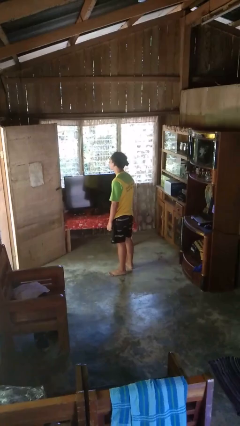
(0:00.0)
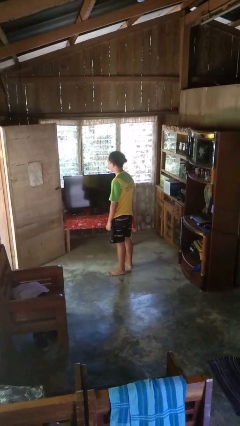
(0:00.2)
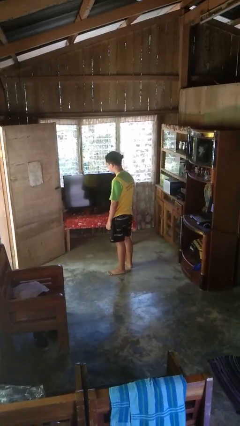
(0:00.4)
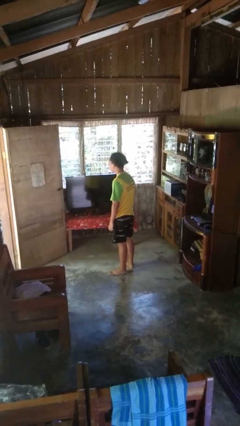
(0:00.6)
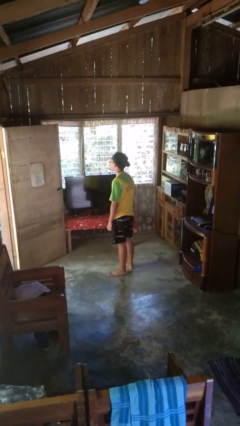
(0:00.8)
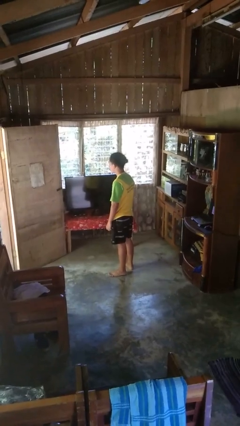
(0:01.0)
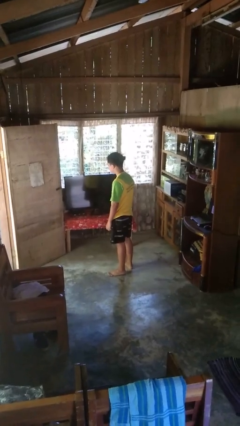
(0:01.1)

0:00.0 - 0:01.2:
person nods head

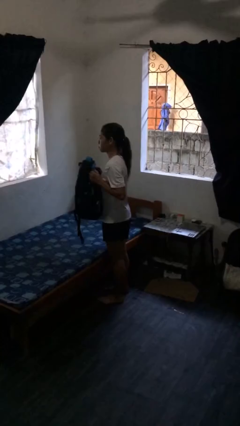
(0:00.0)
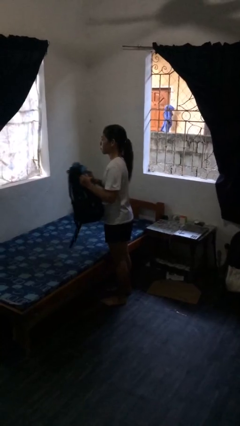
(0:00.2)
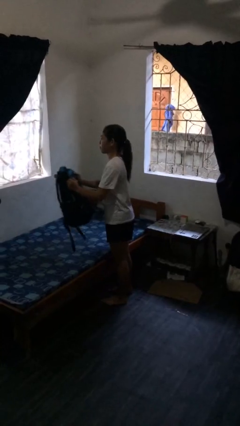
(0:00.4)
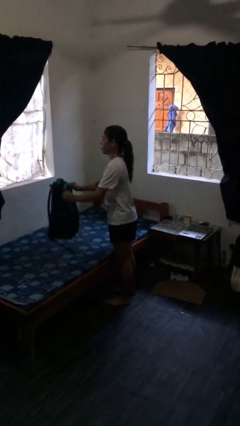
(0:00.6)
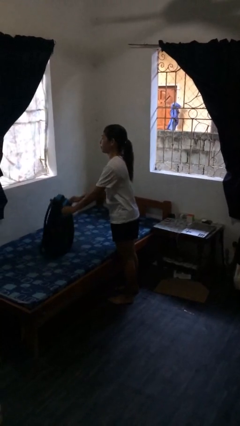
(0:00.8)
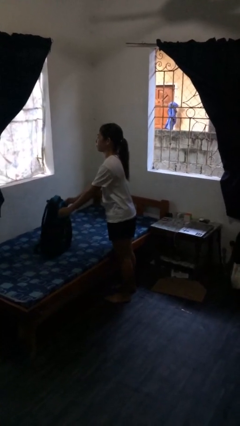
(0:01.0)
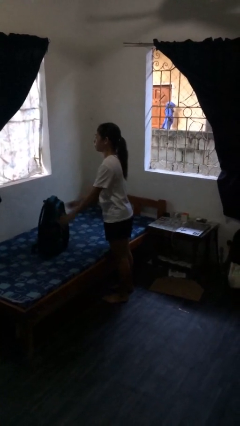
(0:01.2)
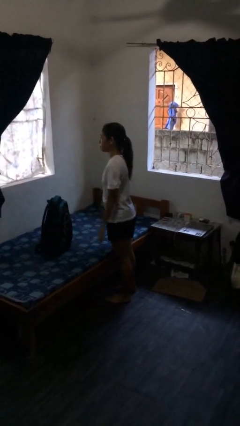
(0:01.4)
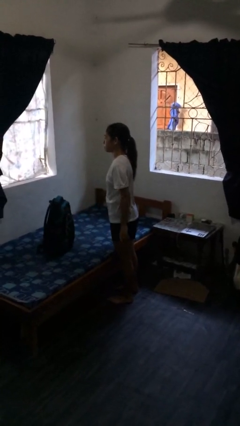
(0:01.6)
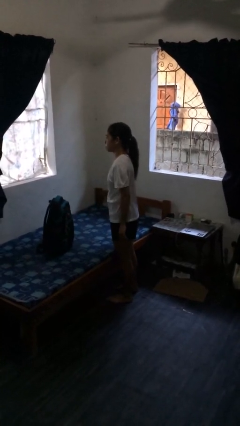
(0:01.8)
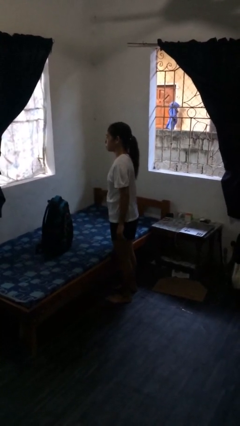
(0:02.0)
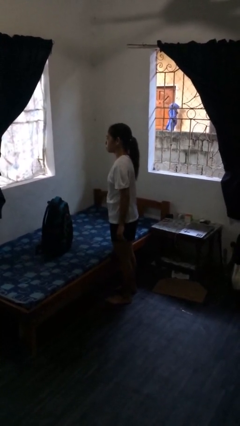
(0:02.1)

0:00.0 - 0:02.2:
person puts down object on bed

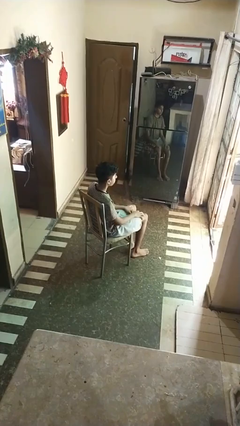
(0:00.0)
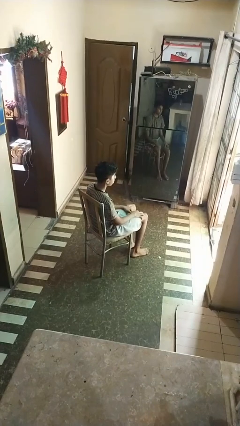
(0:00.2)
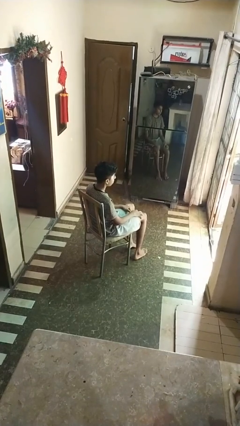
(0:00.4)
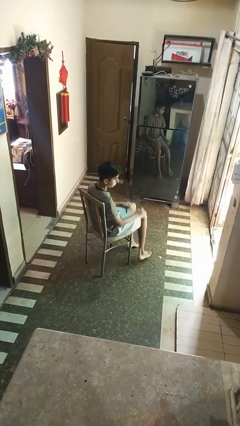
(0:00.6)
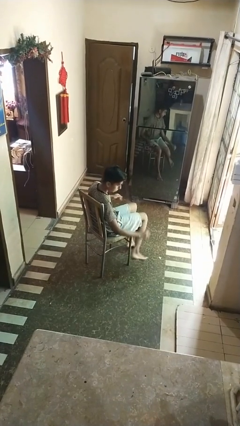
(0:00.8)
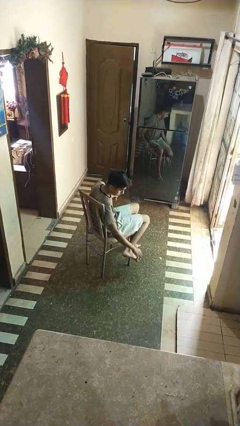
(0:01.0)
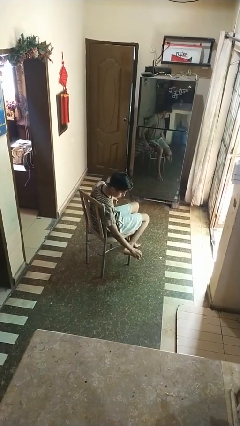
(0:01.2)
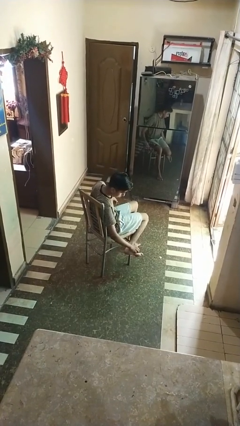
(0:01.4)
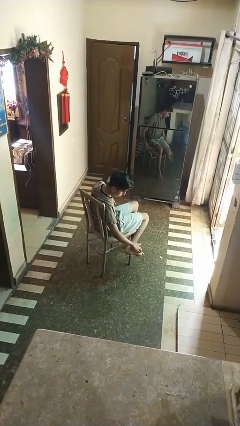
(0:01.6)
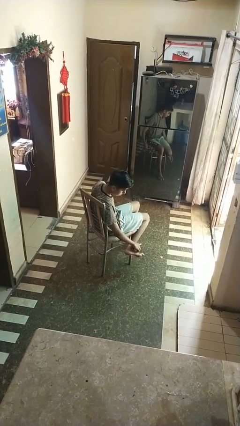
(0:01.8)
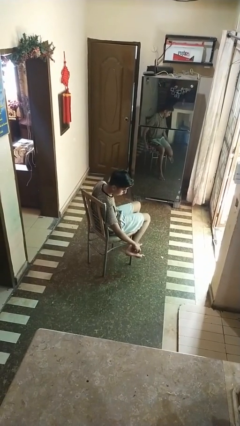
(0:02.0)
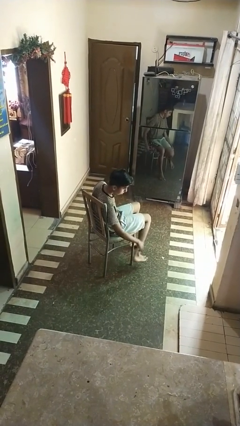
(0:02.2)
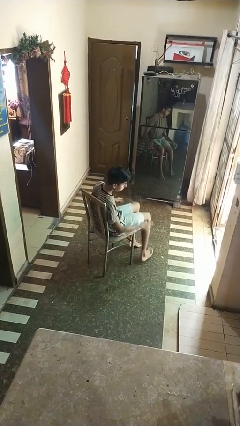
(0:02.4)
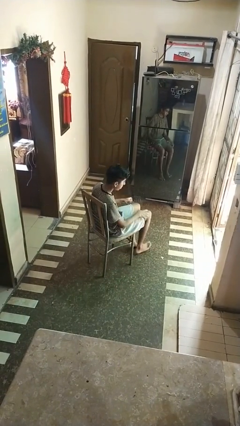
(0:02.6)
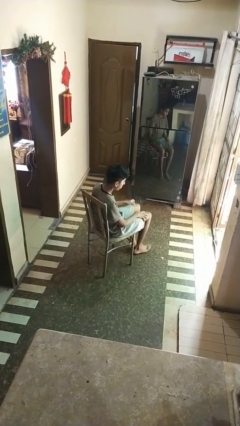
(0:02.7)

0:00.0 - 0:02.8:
person rubs foot

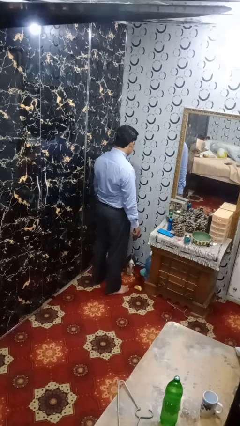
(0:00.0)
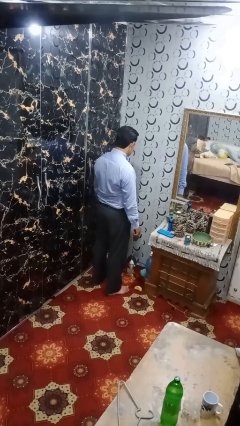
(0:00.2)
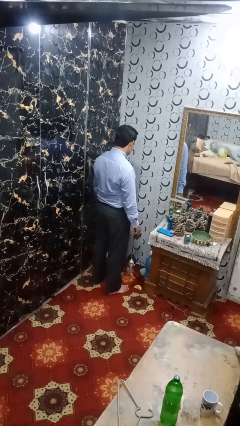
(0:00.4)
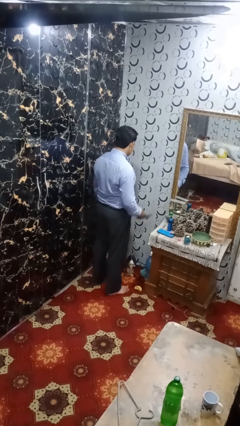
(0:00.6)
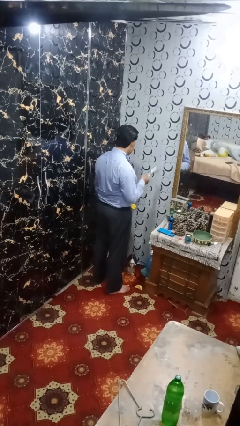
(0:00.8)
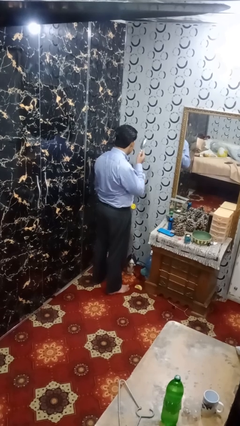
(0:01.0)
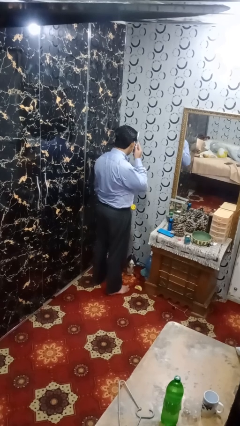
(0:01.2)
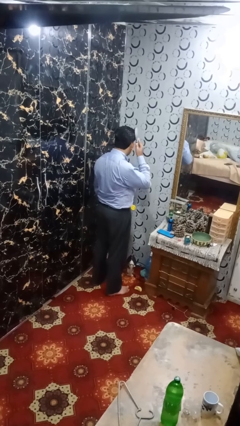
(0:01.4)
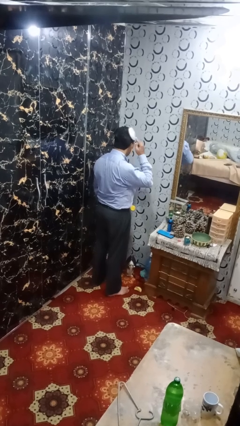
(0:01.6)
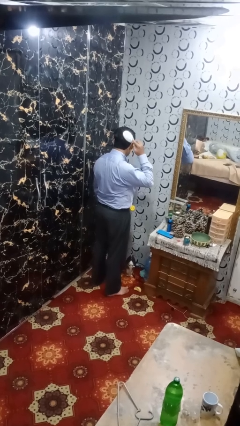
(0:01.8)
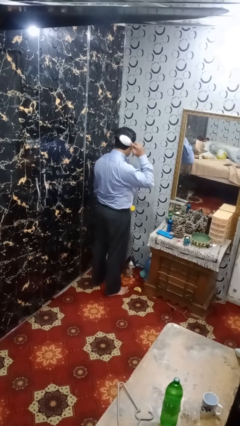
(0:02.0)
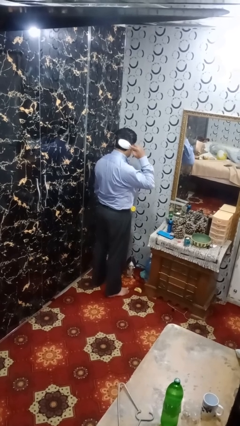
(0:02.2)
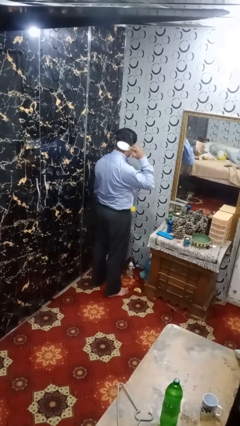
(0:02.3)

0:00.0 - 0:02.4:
person brushes hair

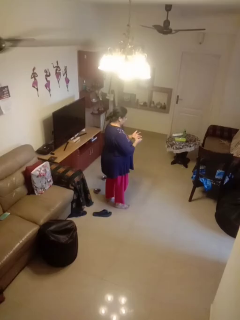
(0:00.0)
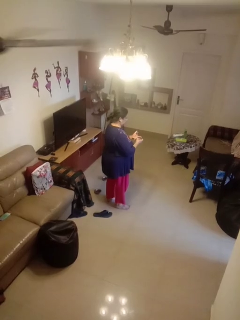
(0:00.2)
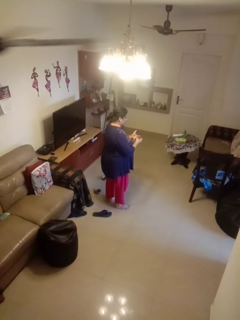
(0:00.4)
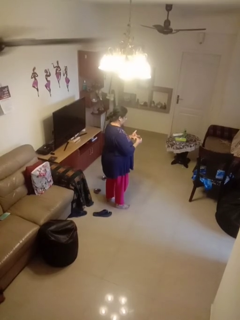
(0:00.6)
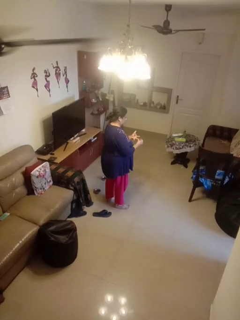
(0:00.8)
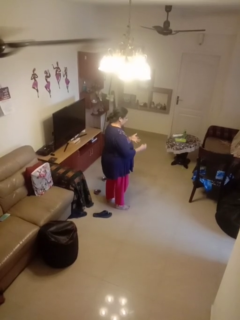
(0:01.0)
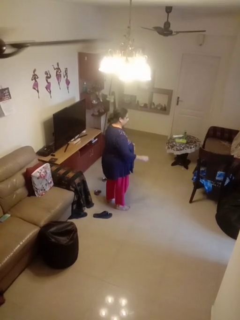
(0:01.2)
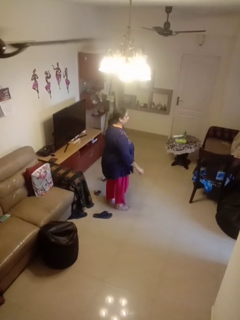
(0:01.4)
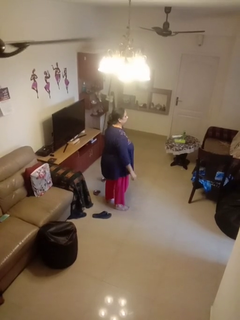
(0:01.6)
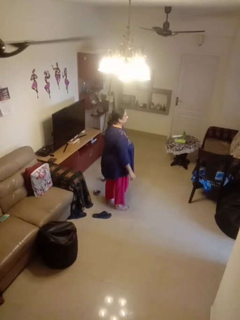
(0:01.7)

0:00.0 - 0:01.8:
person takes off ring

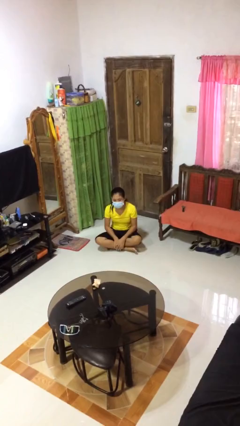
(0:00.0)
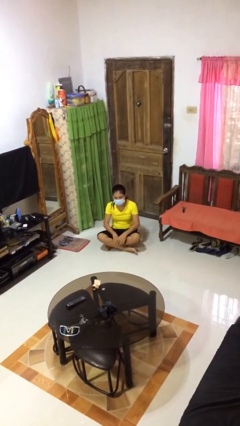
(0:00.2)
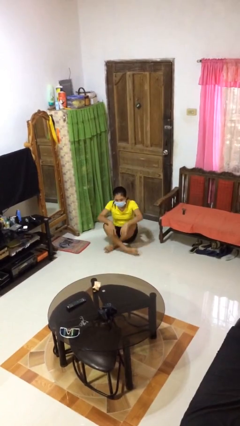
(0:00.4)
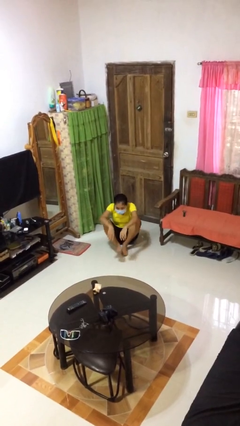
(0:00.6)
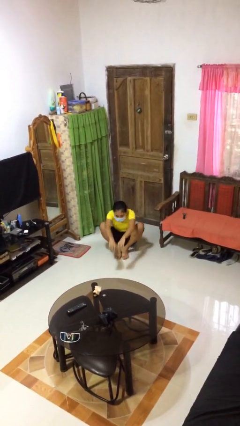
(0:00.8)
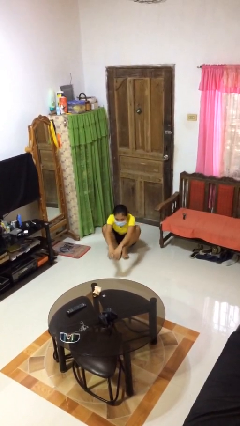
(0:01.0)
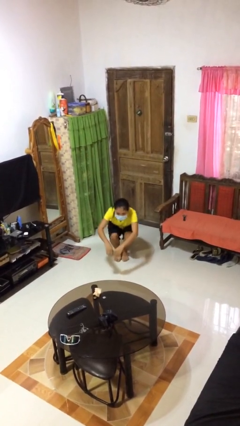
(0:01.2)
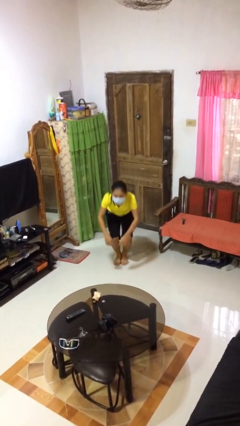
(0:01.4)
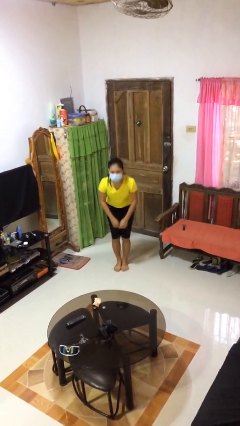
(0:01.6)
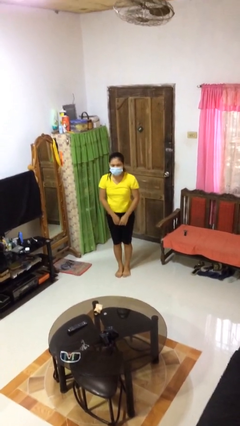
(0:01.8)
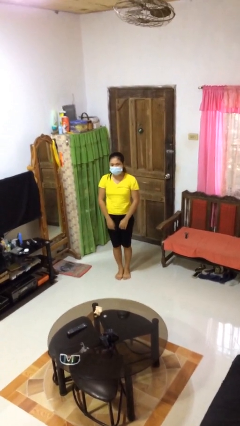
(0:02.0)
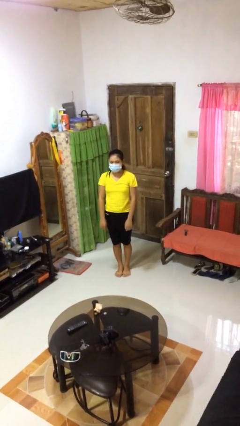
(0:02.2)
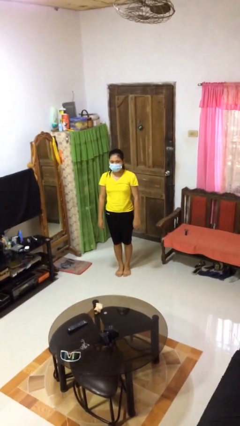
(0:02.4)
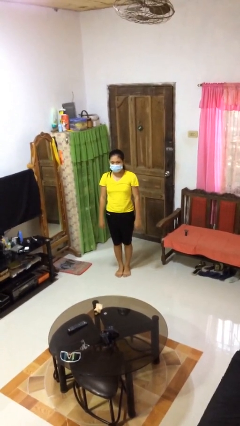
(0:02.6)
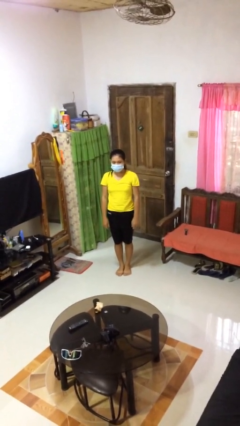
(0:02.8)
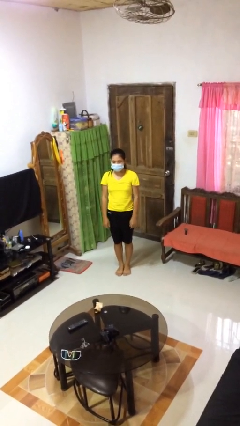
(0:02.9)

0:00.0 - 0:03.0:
person stands up from floor

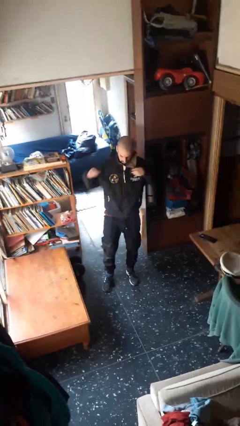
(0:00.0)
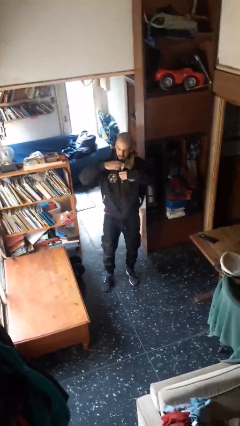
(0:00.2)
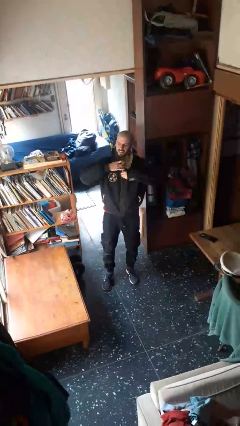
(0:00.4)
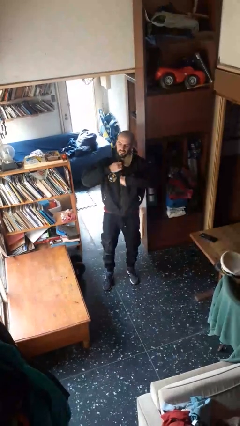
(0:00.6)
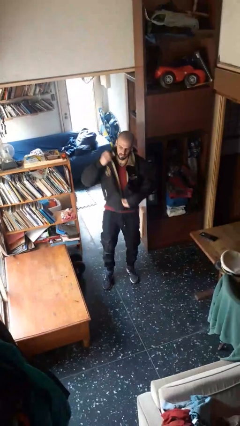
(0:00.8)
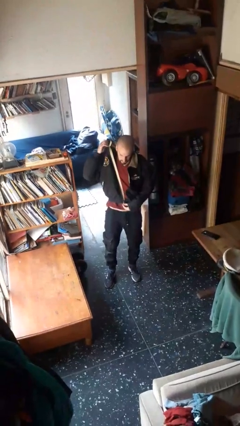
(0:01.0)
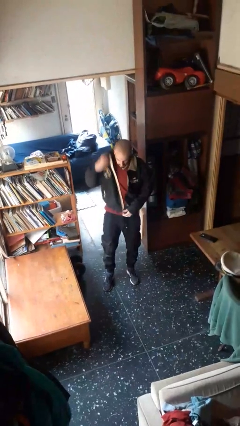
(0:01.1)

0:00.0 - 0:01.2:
person unzips jacket

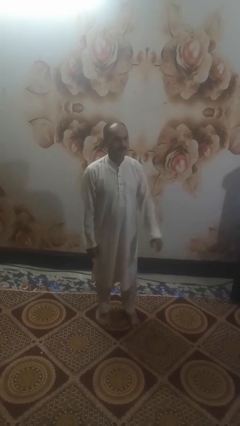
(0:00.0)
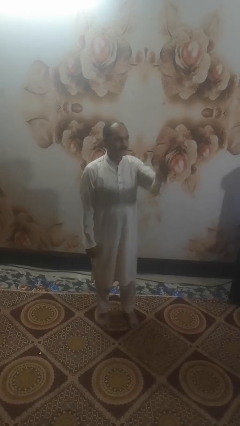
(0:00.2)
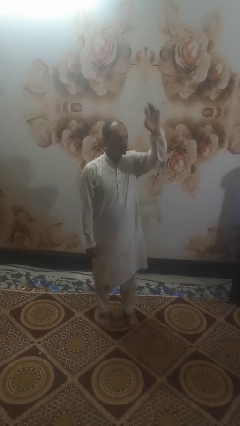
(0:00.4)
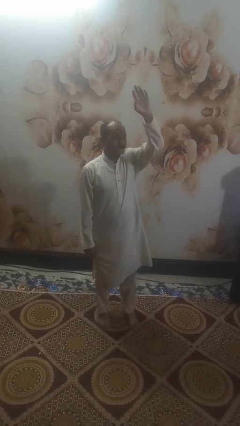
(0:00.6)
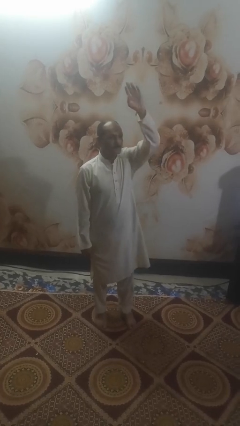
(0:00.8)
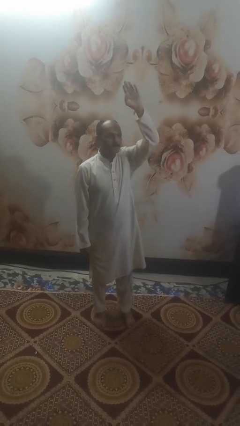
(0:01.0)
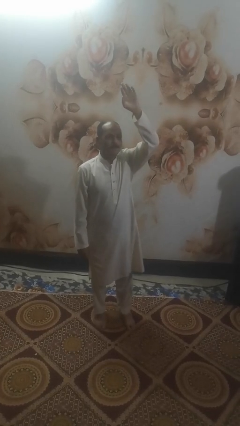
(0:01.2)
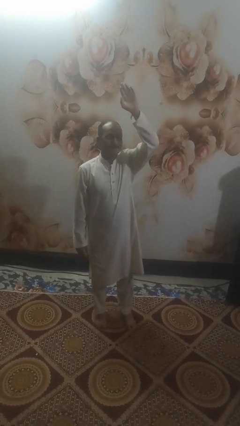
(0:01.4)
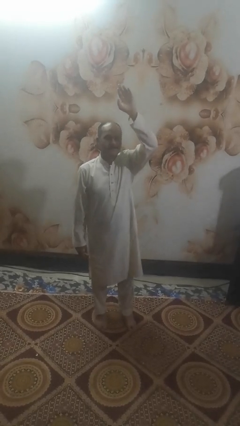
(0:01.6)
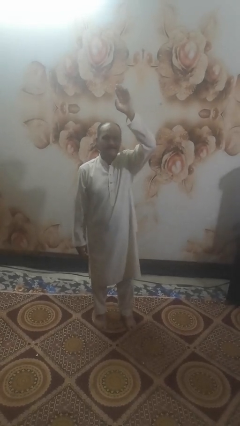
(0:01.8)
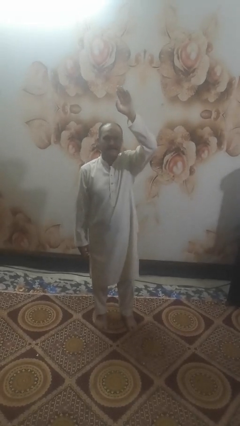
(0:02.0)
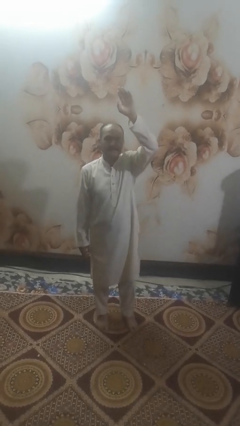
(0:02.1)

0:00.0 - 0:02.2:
person gestures raise hand

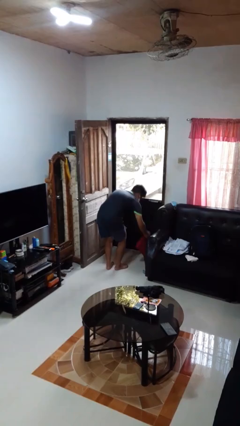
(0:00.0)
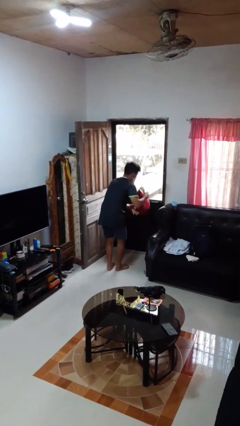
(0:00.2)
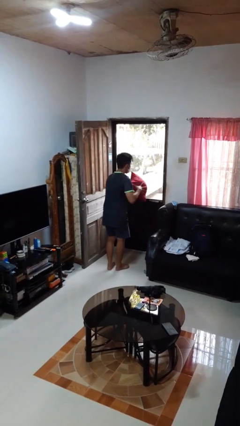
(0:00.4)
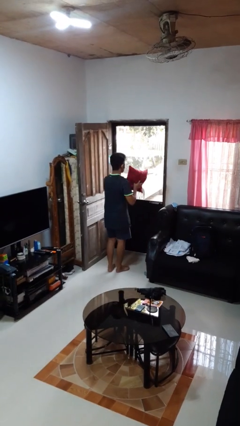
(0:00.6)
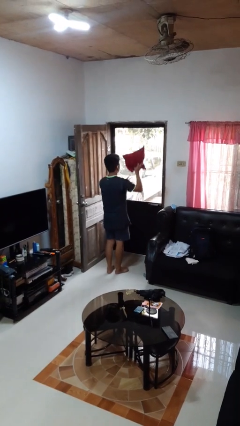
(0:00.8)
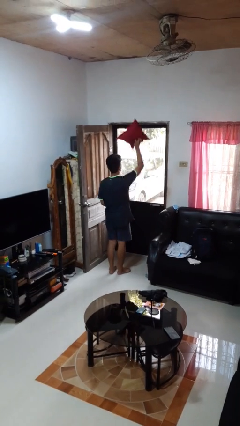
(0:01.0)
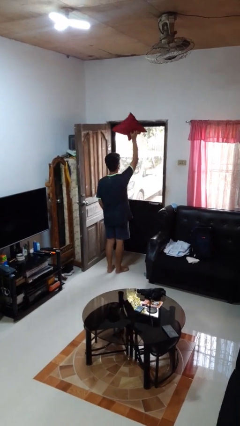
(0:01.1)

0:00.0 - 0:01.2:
person picks up object from floor
